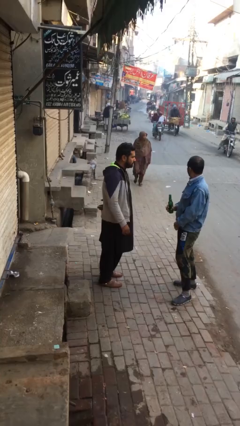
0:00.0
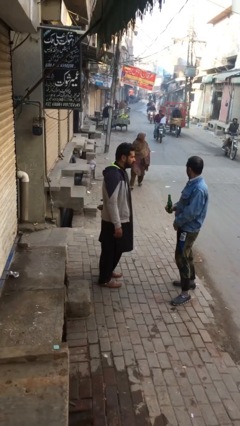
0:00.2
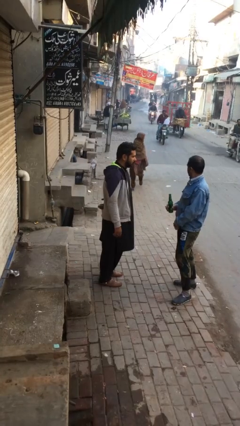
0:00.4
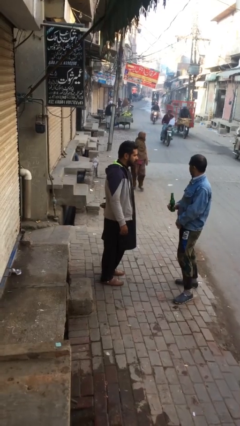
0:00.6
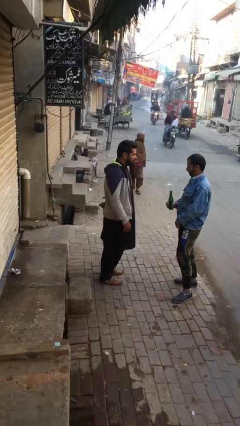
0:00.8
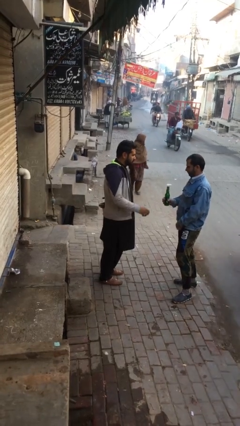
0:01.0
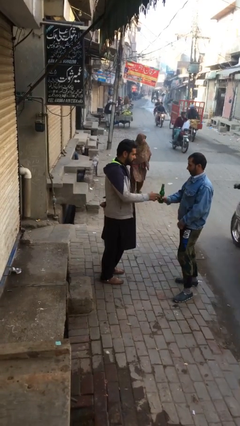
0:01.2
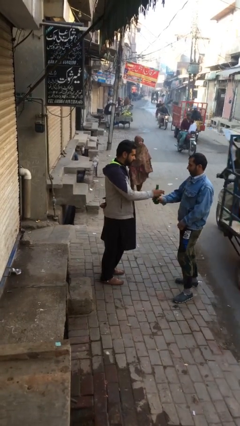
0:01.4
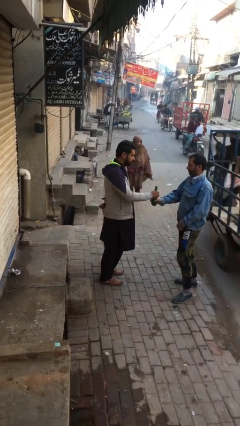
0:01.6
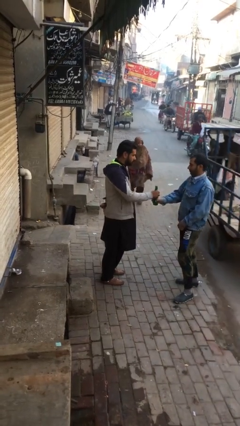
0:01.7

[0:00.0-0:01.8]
person transfers object to person

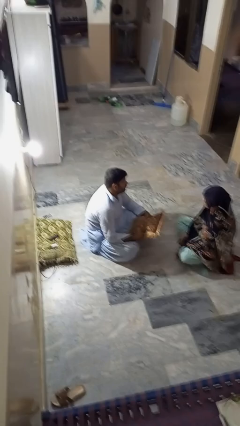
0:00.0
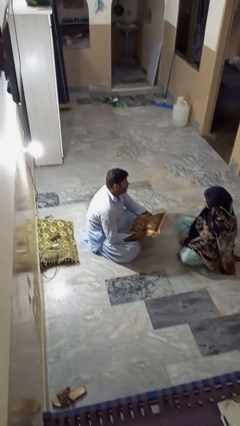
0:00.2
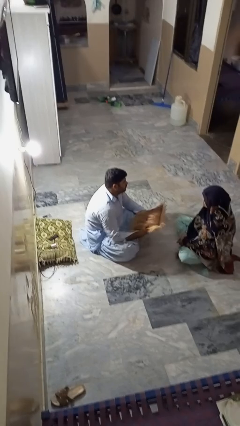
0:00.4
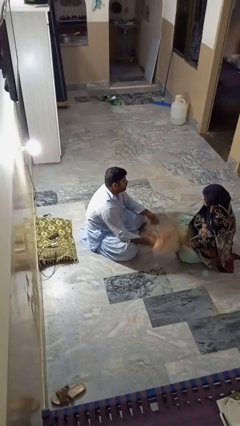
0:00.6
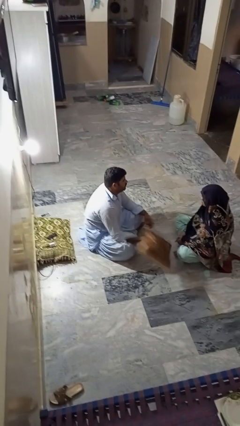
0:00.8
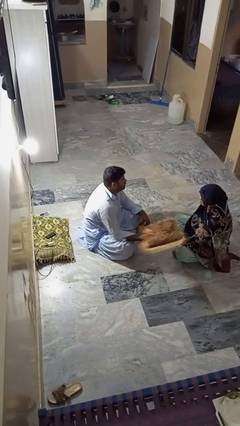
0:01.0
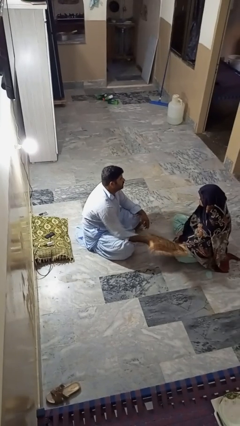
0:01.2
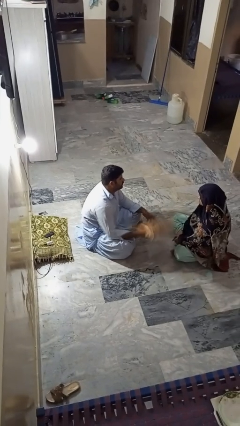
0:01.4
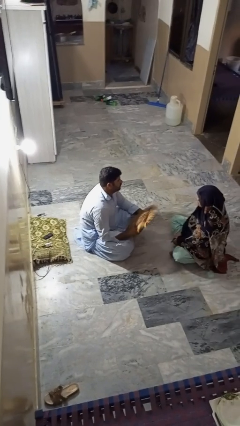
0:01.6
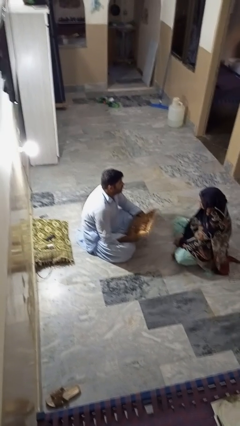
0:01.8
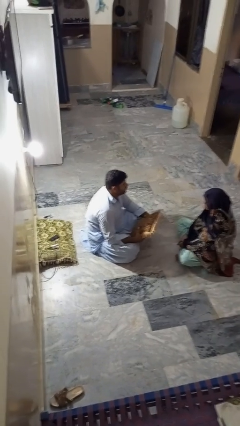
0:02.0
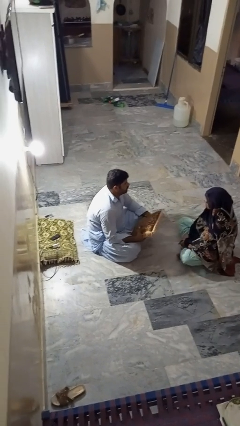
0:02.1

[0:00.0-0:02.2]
person hits person with pillow

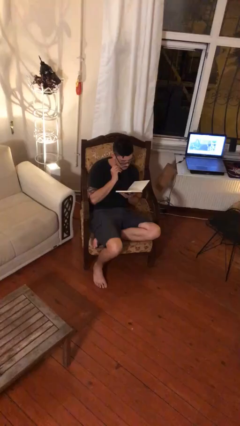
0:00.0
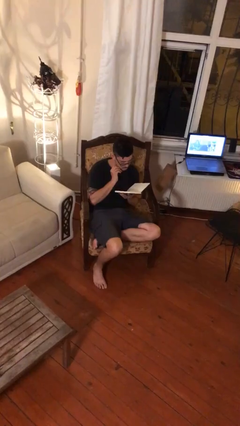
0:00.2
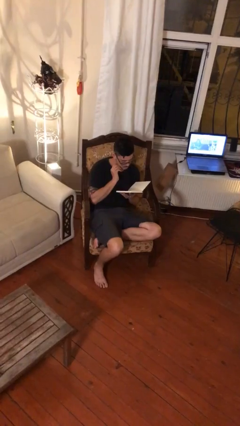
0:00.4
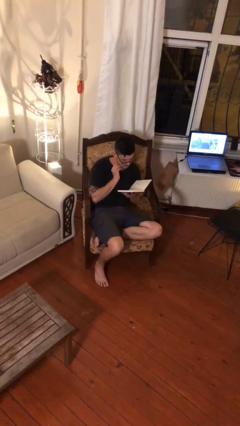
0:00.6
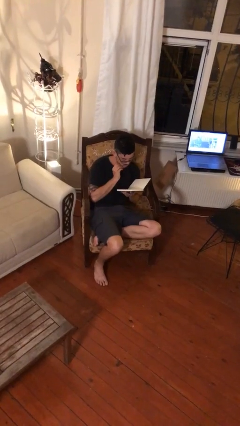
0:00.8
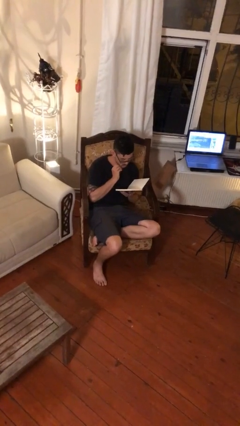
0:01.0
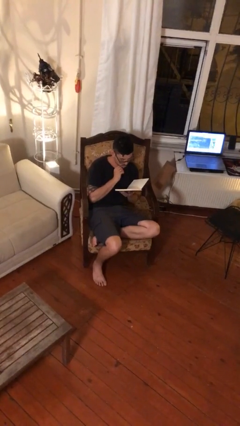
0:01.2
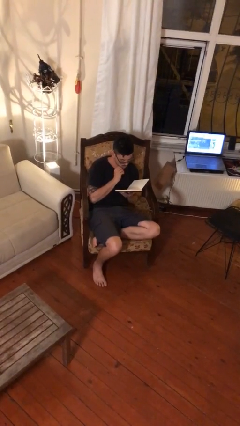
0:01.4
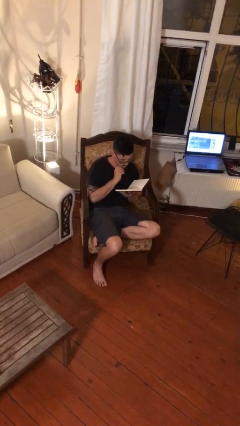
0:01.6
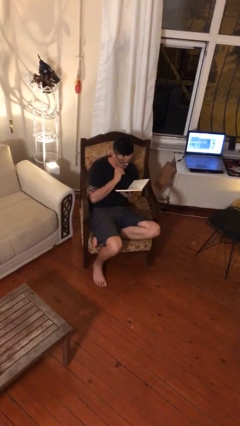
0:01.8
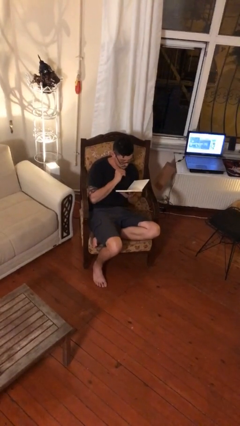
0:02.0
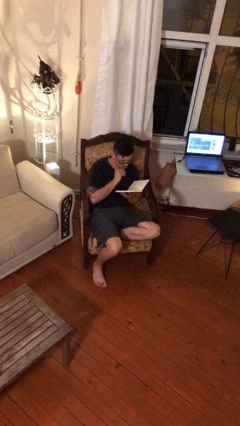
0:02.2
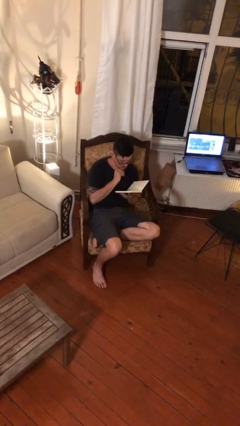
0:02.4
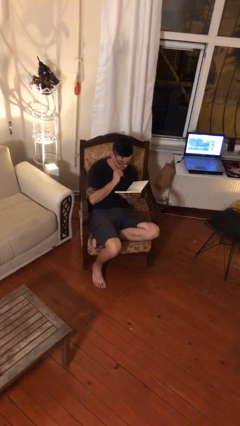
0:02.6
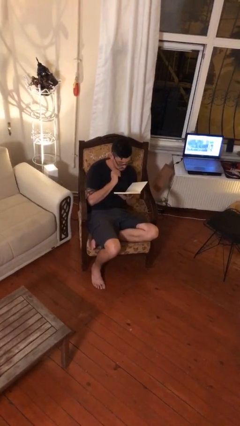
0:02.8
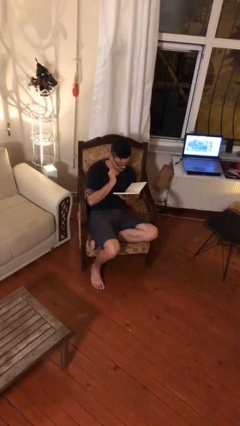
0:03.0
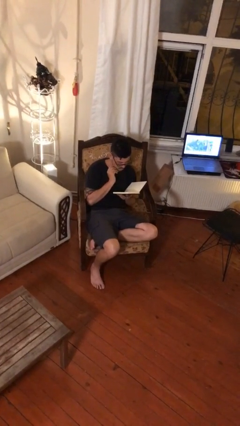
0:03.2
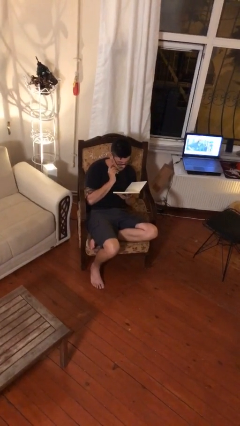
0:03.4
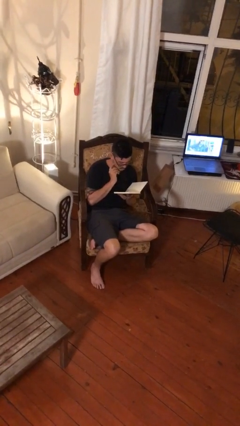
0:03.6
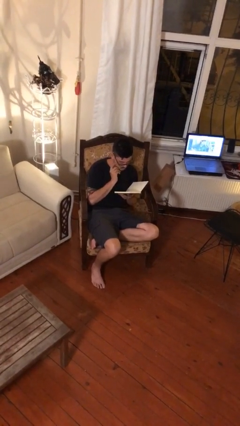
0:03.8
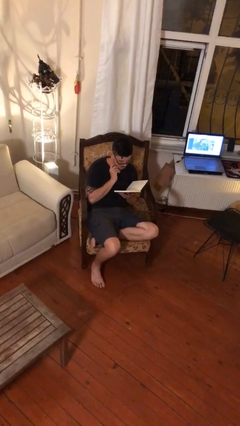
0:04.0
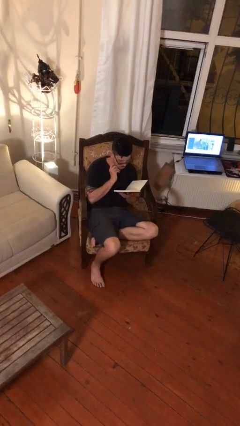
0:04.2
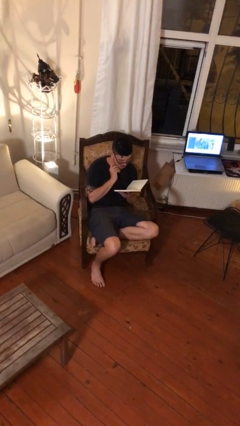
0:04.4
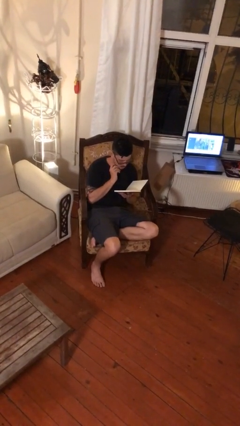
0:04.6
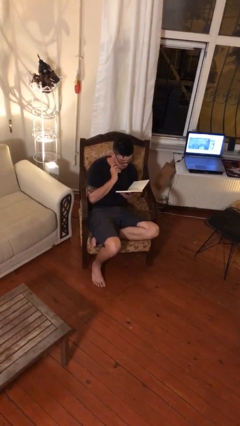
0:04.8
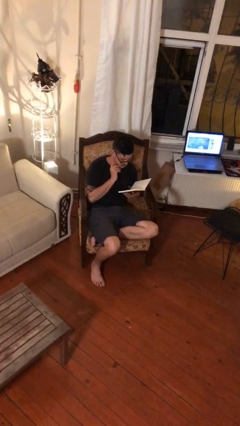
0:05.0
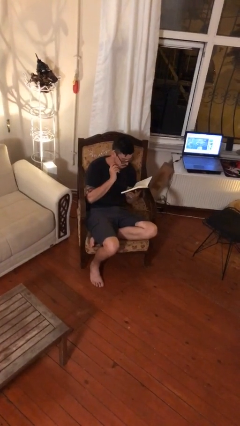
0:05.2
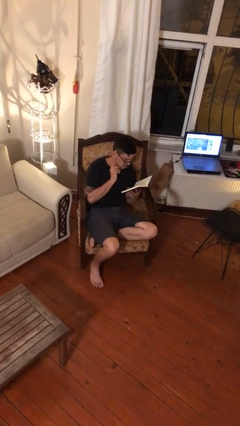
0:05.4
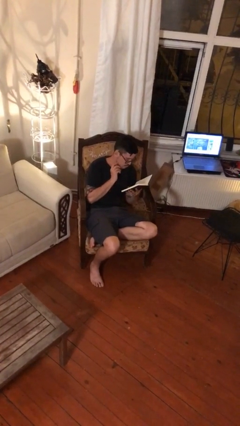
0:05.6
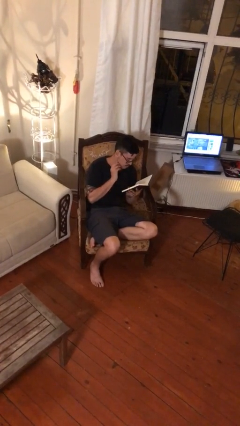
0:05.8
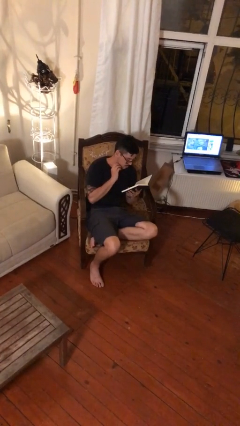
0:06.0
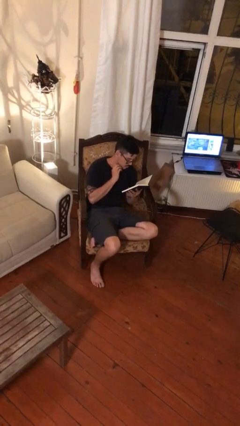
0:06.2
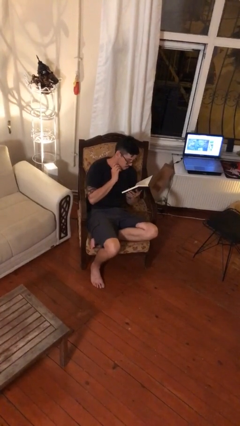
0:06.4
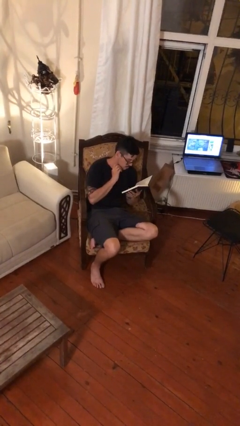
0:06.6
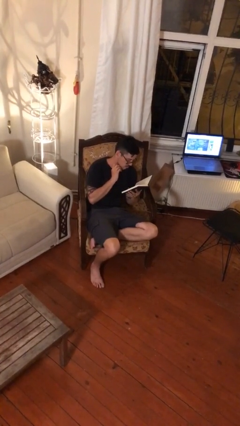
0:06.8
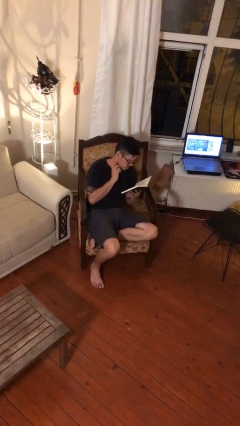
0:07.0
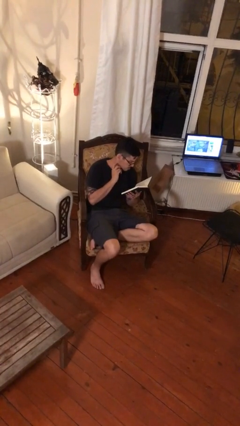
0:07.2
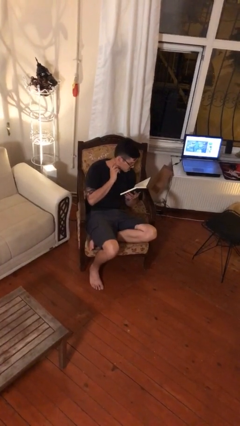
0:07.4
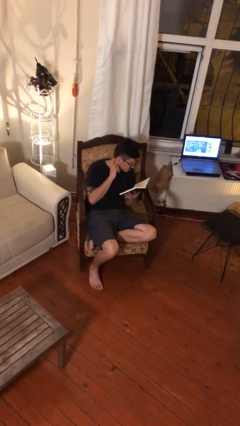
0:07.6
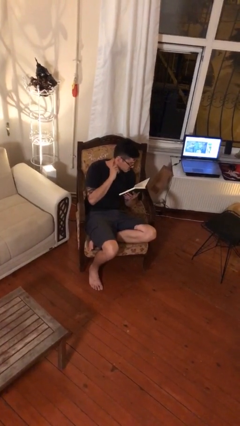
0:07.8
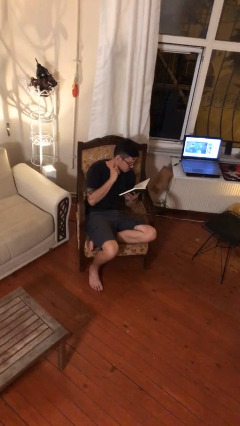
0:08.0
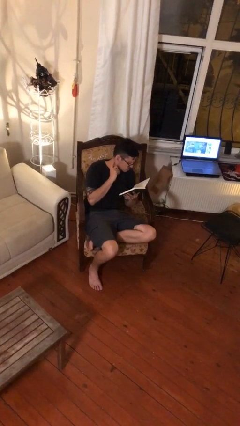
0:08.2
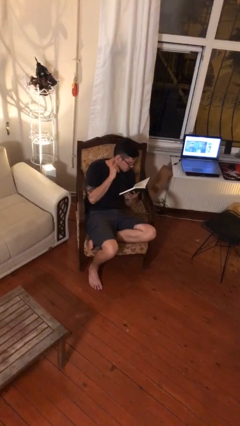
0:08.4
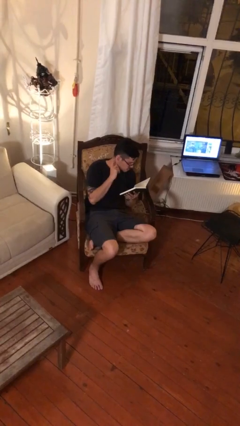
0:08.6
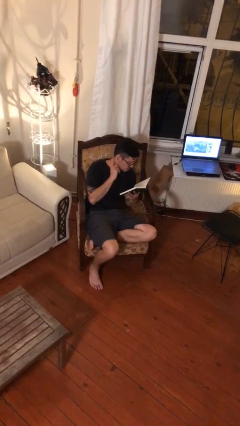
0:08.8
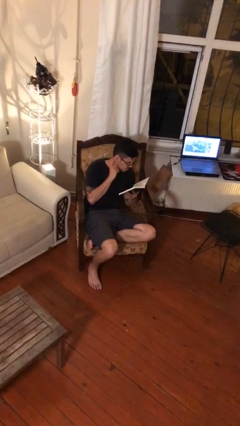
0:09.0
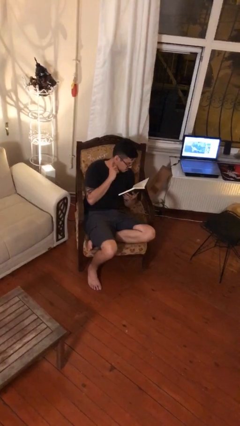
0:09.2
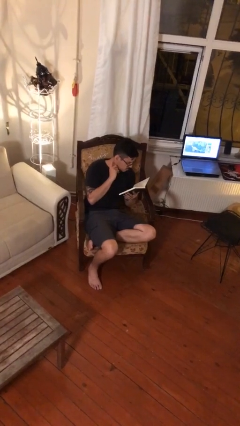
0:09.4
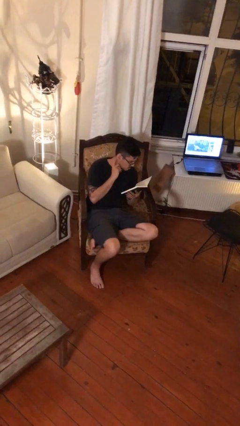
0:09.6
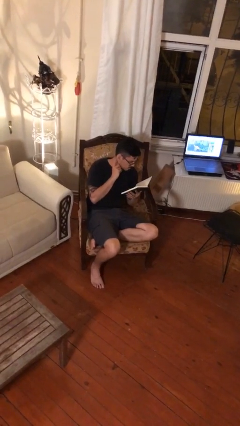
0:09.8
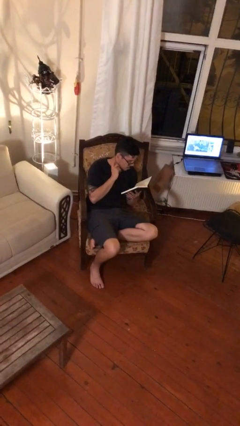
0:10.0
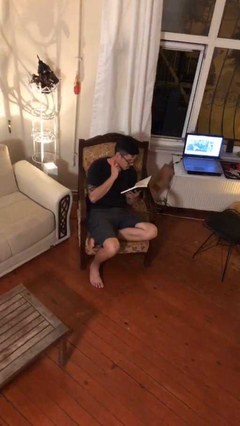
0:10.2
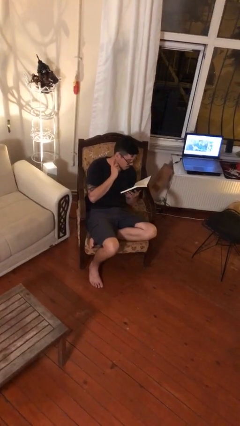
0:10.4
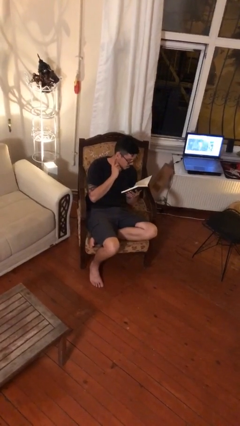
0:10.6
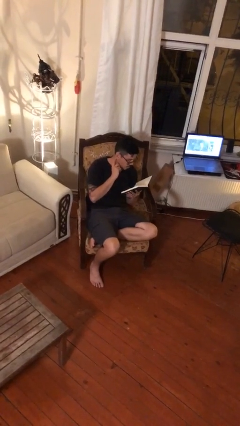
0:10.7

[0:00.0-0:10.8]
person reads document

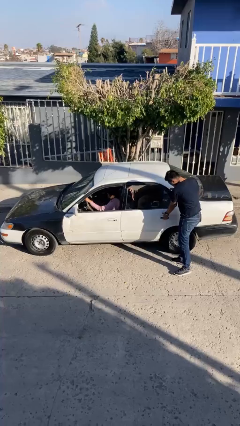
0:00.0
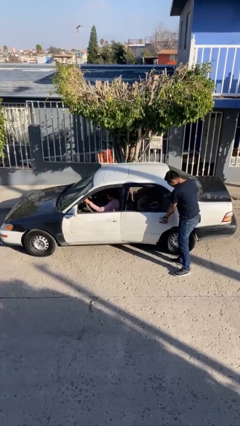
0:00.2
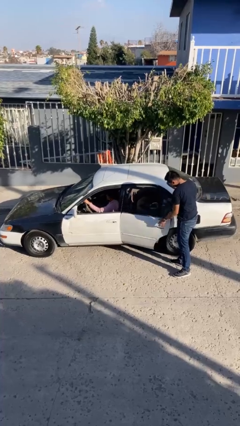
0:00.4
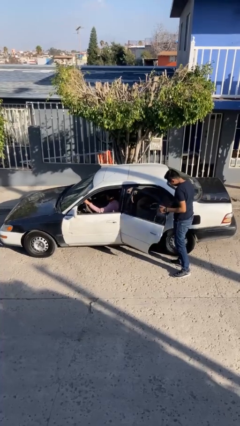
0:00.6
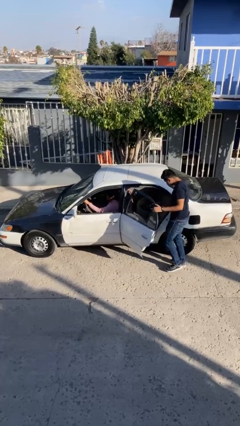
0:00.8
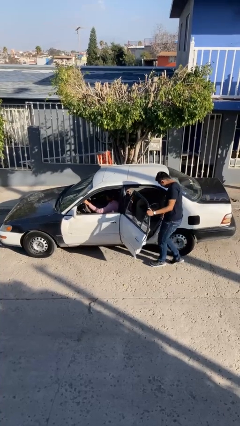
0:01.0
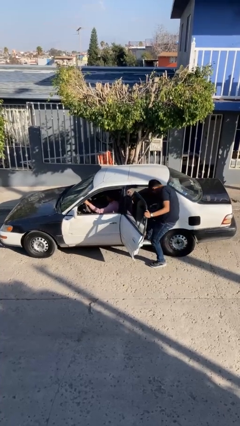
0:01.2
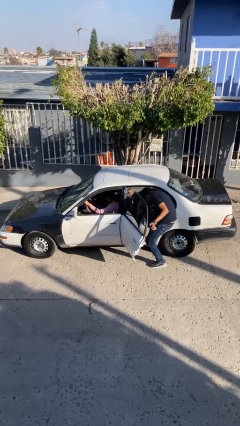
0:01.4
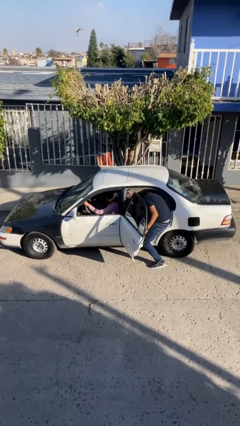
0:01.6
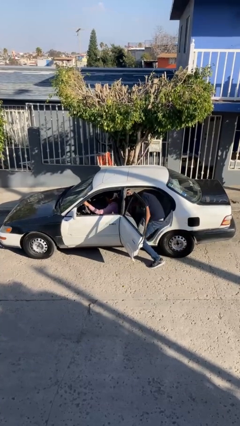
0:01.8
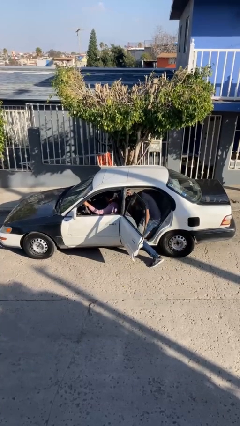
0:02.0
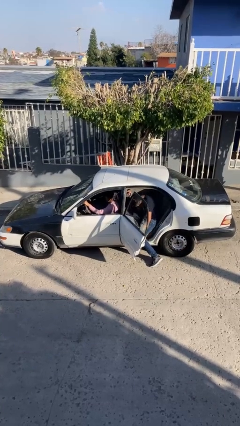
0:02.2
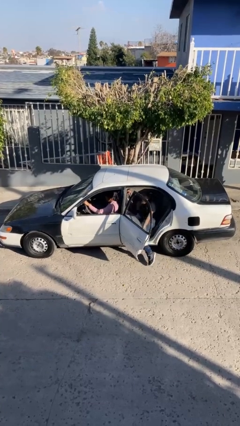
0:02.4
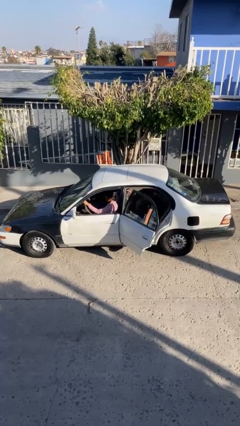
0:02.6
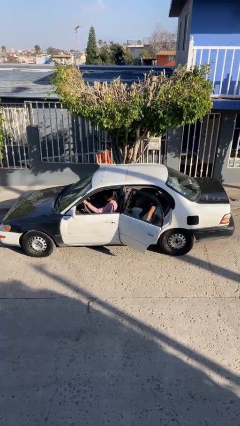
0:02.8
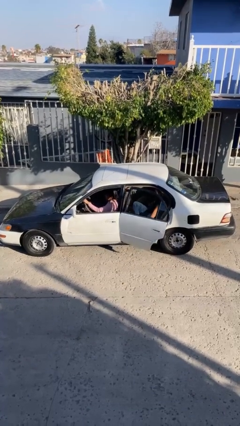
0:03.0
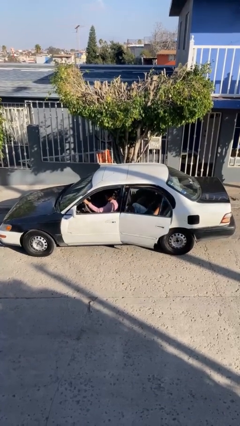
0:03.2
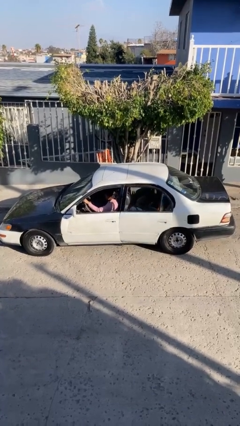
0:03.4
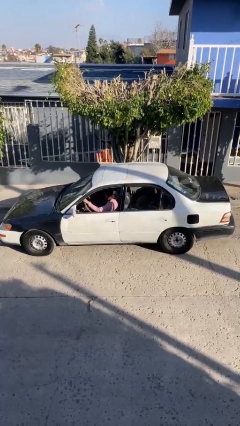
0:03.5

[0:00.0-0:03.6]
car picks up person
